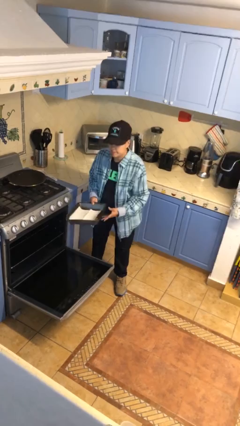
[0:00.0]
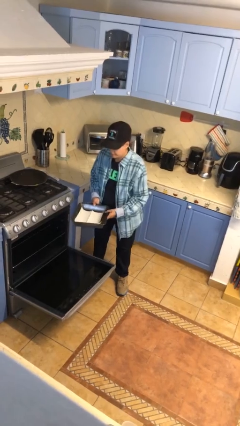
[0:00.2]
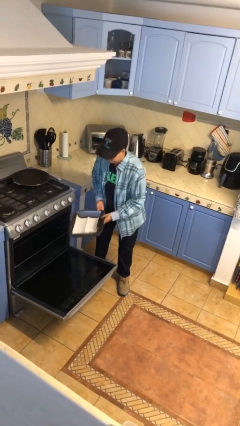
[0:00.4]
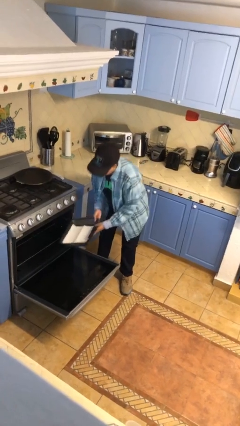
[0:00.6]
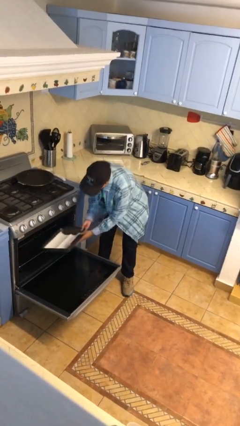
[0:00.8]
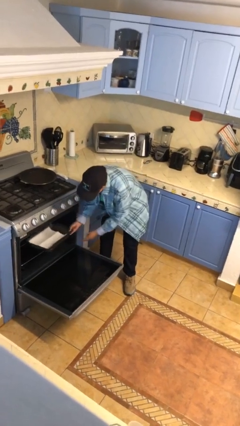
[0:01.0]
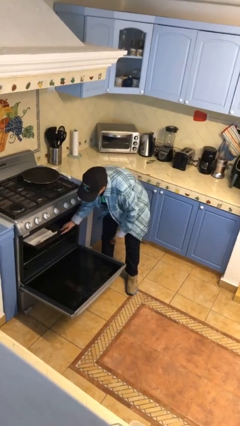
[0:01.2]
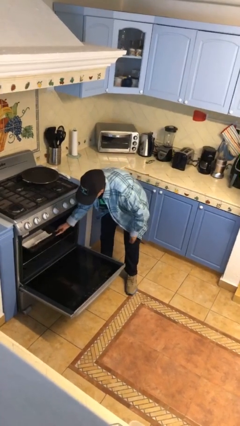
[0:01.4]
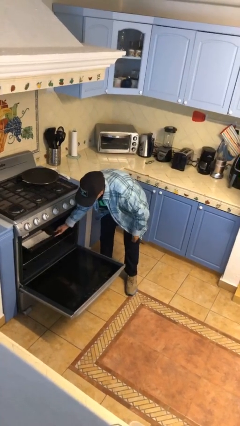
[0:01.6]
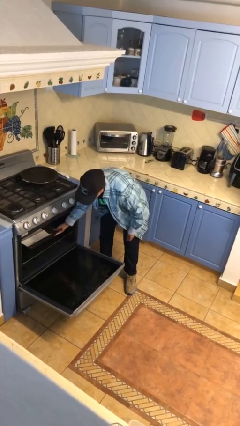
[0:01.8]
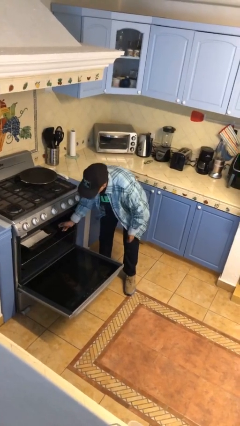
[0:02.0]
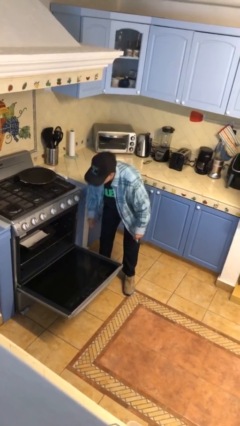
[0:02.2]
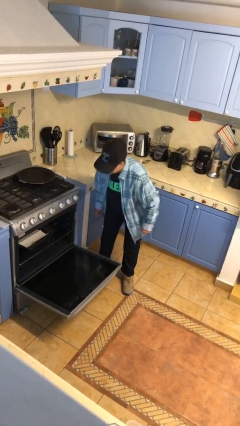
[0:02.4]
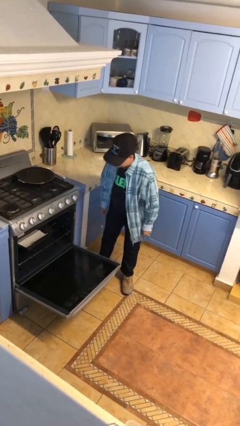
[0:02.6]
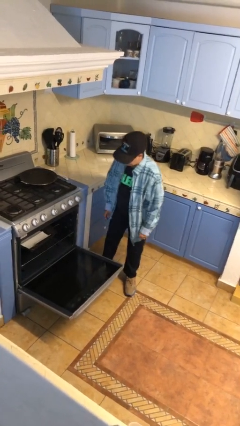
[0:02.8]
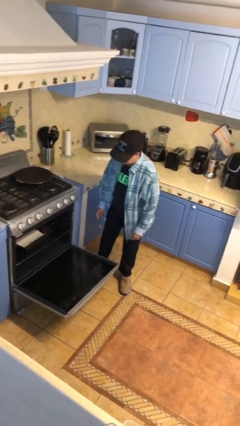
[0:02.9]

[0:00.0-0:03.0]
person puts object into oven

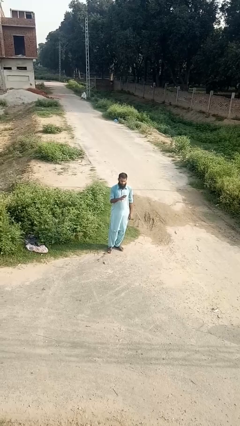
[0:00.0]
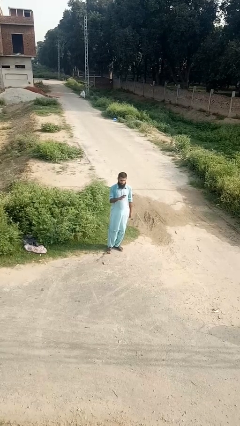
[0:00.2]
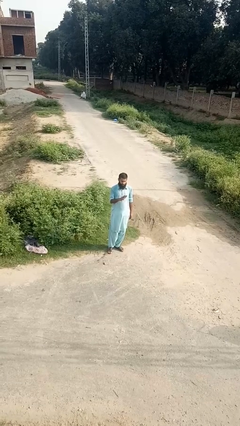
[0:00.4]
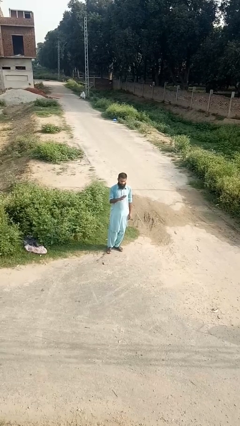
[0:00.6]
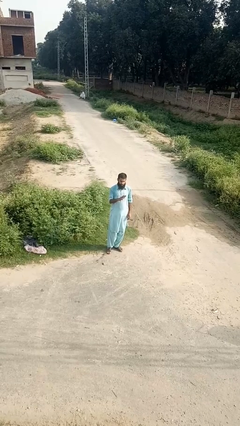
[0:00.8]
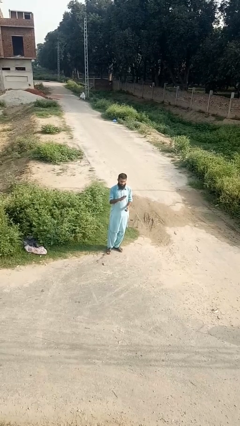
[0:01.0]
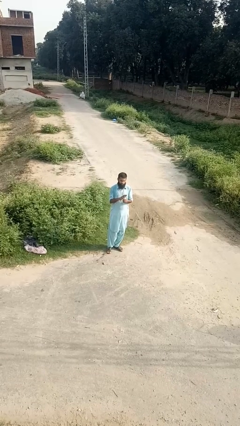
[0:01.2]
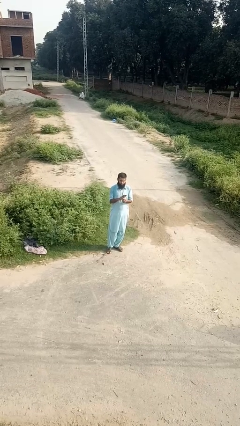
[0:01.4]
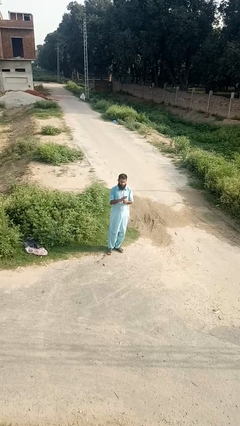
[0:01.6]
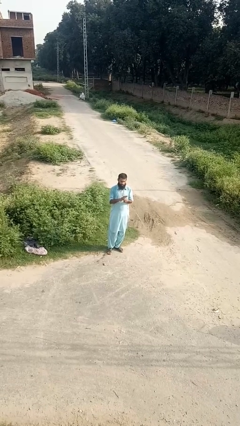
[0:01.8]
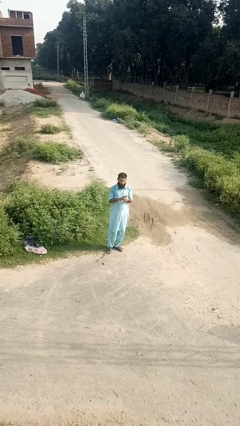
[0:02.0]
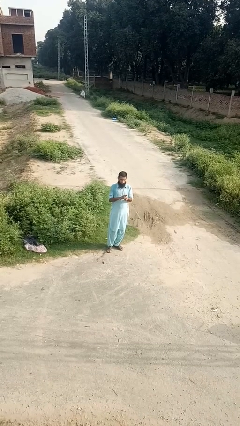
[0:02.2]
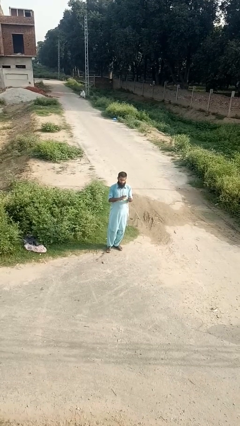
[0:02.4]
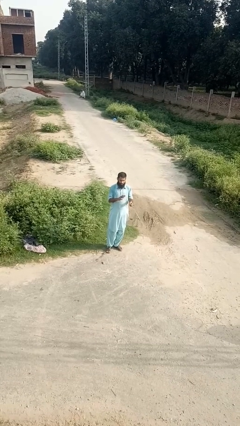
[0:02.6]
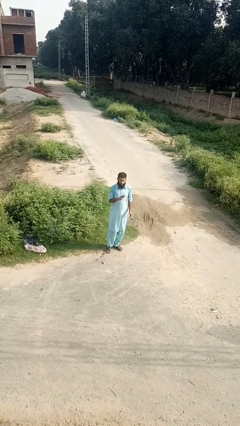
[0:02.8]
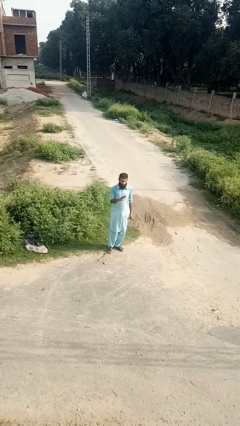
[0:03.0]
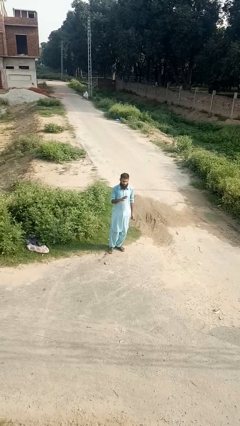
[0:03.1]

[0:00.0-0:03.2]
person takes off ring

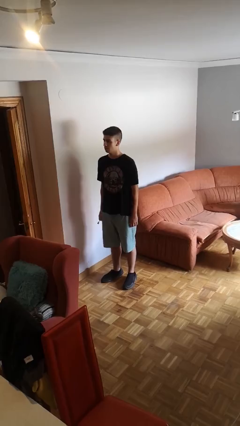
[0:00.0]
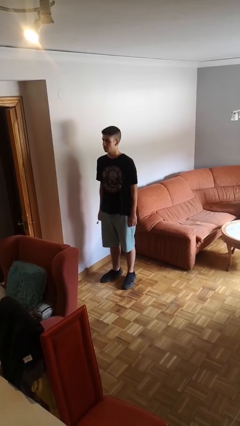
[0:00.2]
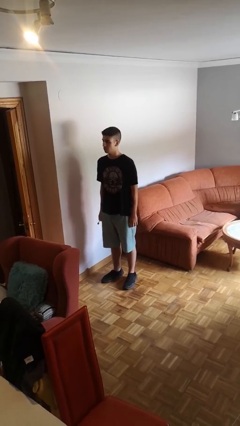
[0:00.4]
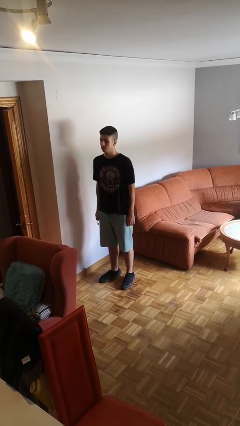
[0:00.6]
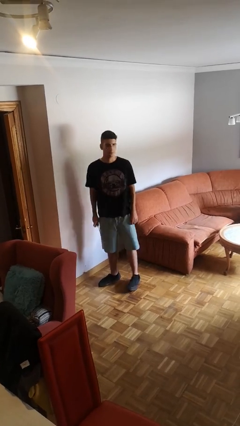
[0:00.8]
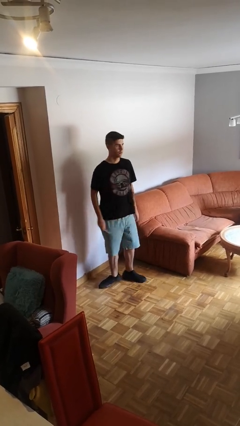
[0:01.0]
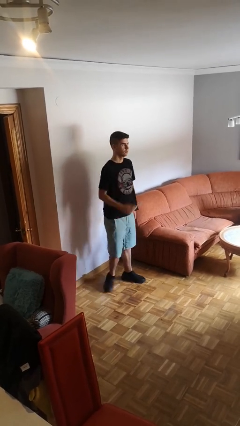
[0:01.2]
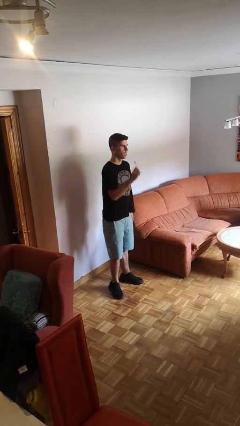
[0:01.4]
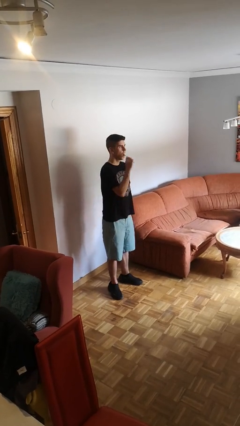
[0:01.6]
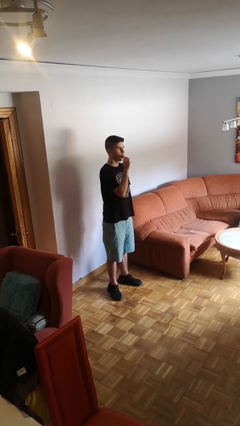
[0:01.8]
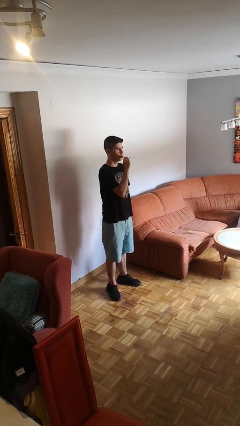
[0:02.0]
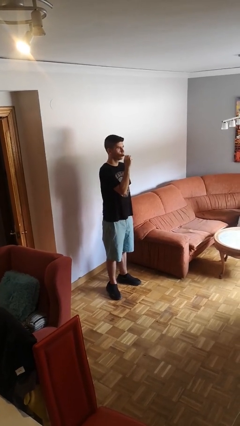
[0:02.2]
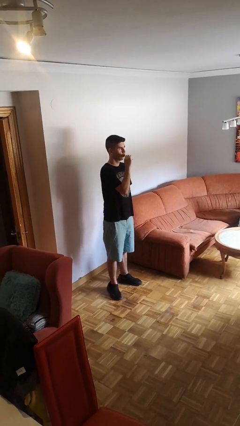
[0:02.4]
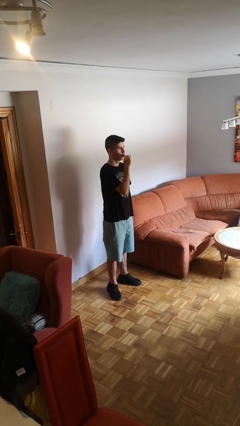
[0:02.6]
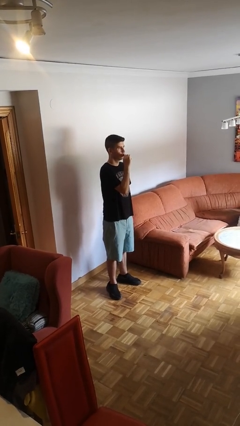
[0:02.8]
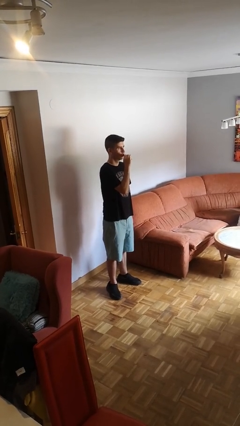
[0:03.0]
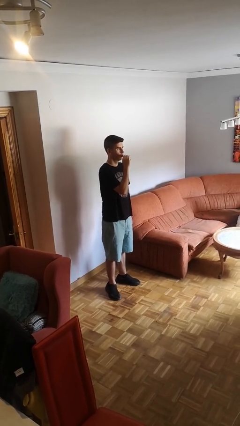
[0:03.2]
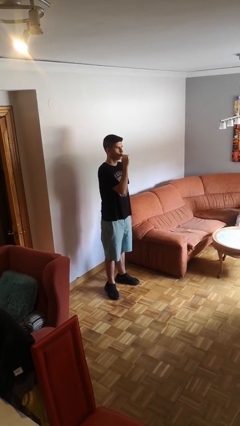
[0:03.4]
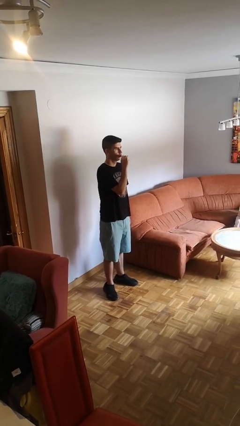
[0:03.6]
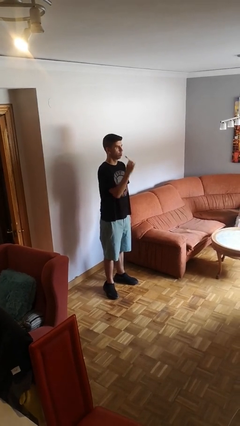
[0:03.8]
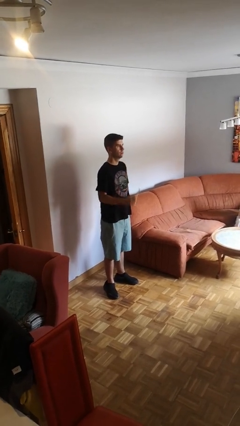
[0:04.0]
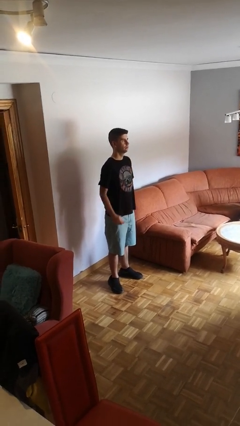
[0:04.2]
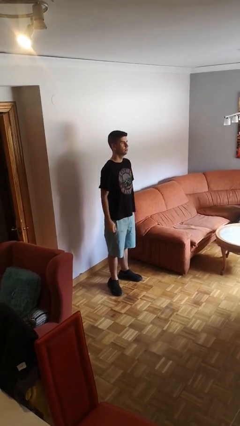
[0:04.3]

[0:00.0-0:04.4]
person brushes teeth

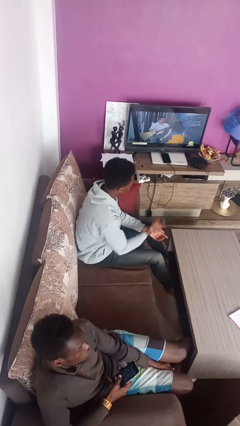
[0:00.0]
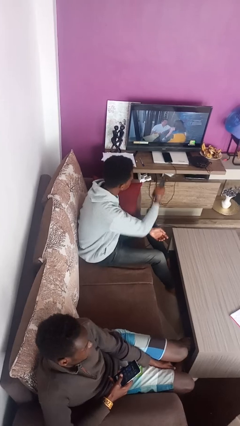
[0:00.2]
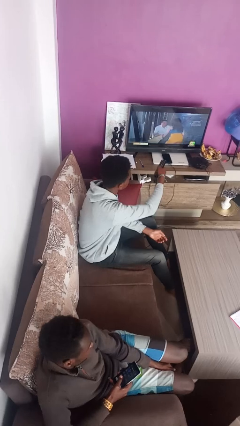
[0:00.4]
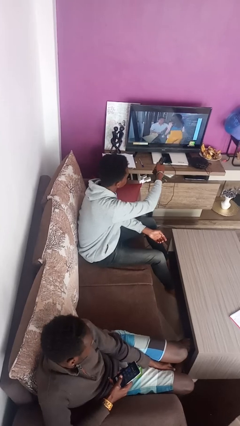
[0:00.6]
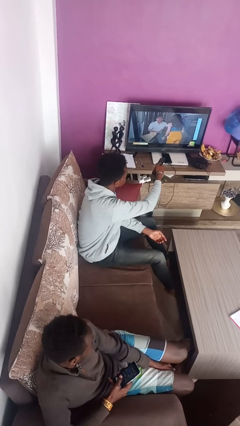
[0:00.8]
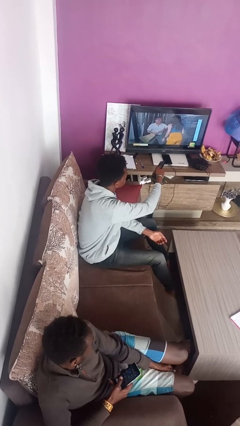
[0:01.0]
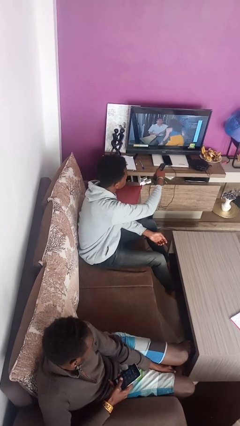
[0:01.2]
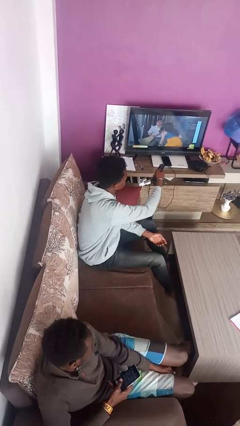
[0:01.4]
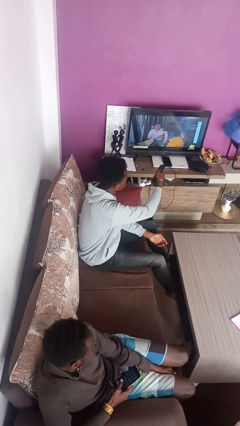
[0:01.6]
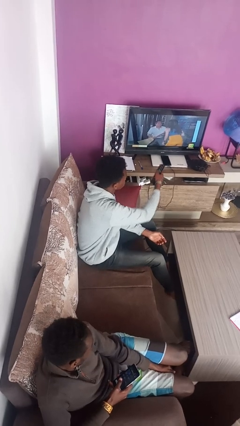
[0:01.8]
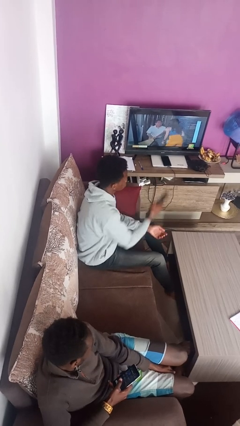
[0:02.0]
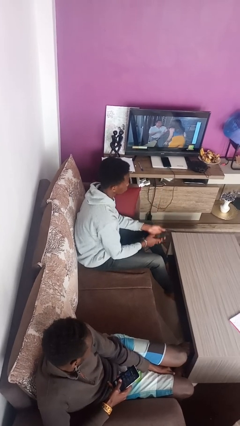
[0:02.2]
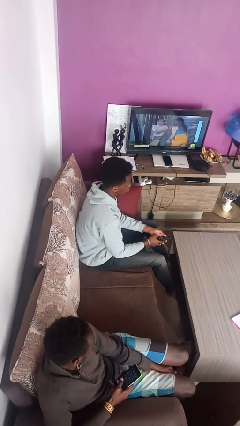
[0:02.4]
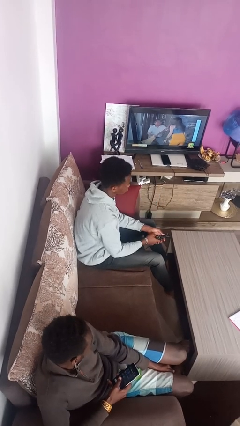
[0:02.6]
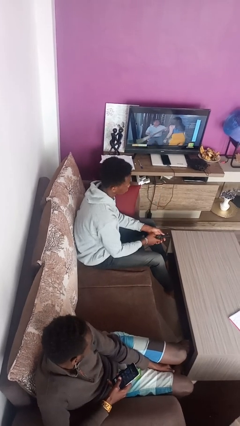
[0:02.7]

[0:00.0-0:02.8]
person uses television remote

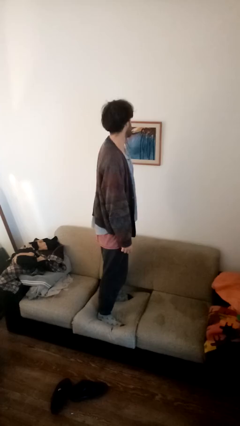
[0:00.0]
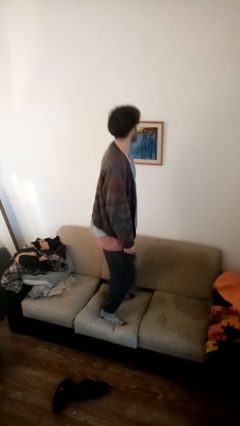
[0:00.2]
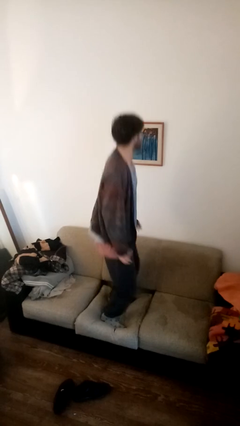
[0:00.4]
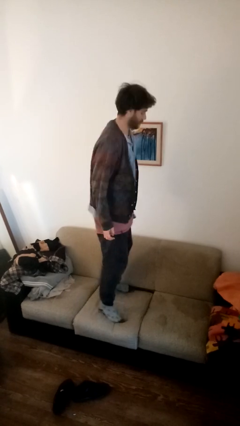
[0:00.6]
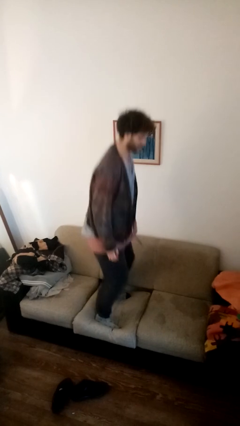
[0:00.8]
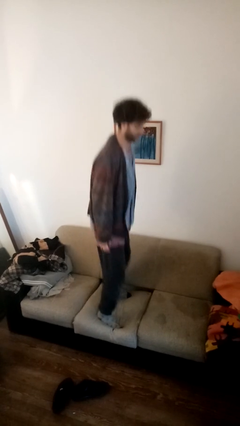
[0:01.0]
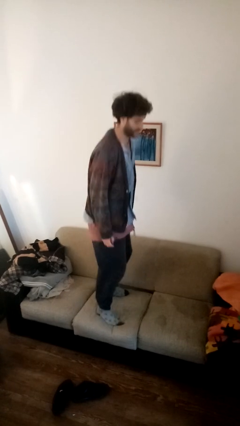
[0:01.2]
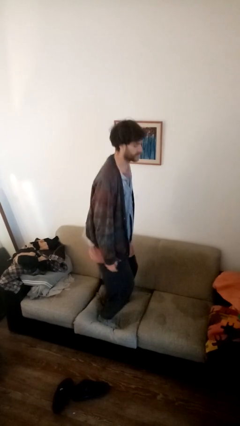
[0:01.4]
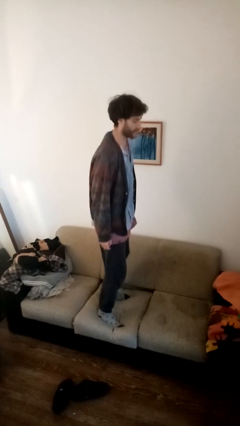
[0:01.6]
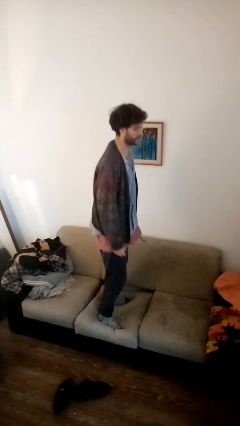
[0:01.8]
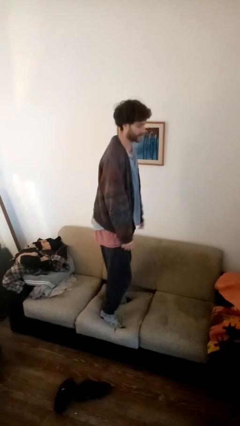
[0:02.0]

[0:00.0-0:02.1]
person jumps on couch

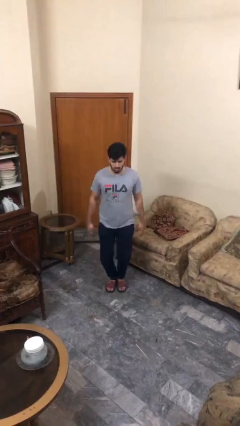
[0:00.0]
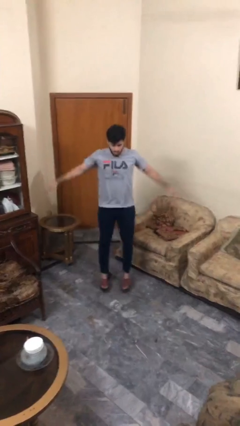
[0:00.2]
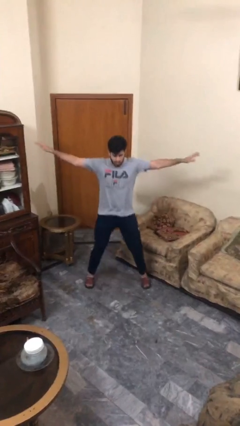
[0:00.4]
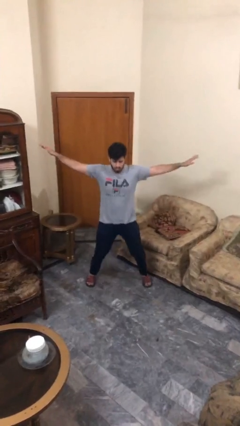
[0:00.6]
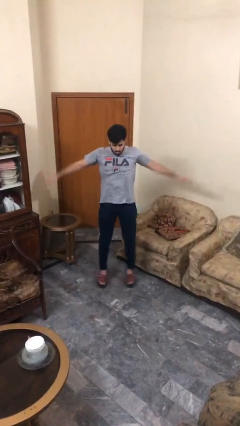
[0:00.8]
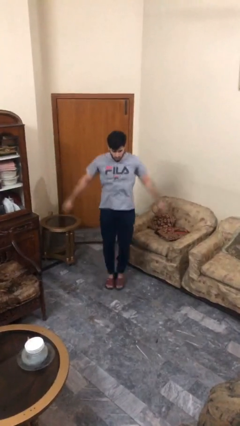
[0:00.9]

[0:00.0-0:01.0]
person exercises with jumping jacks

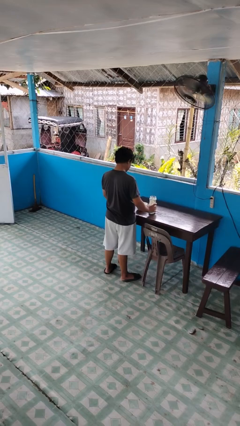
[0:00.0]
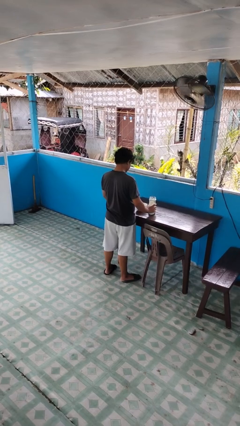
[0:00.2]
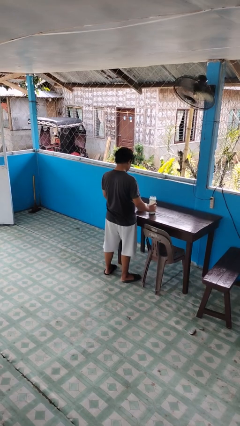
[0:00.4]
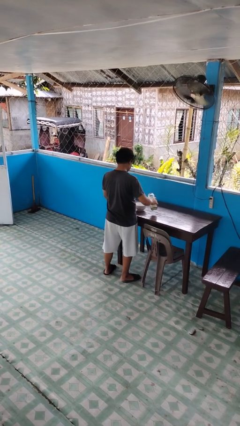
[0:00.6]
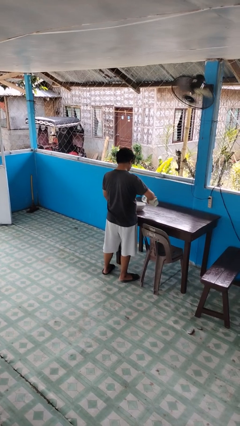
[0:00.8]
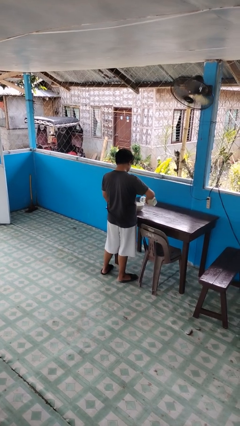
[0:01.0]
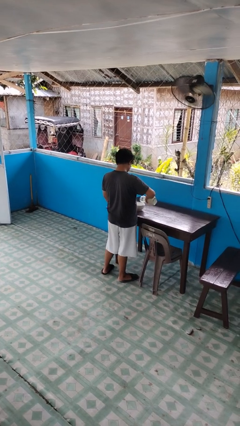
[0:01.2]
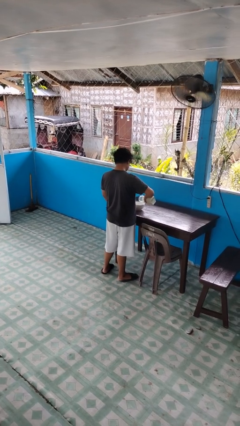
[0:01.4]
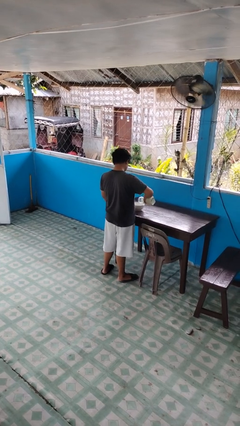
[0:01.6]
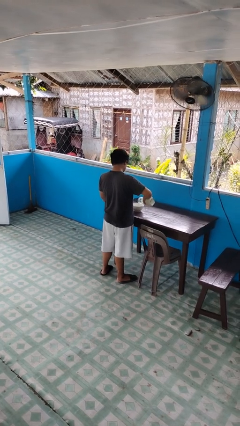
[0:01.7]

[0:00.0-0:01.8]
person pours into bowl
